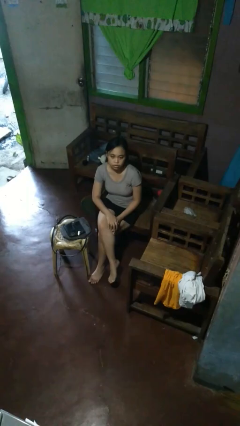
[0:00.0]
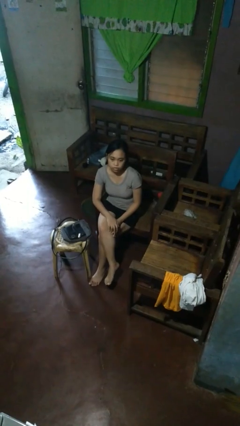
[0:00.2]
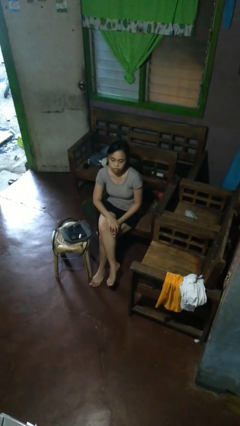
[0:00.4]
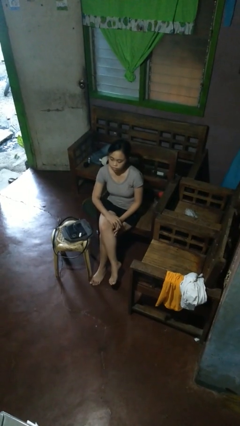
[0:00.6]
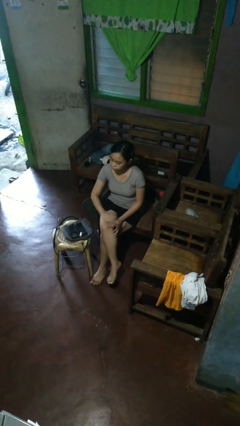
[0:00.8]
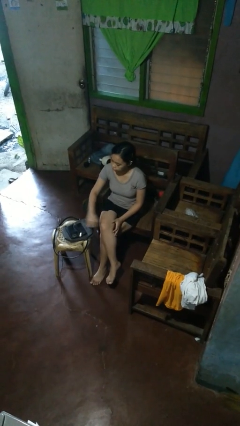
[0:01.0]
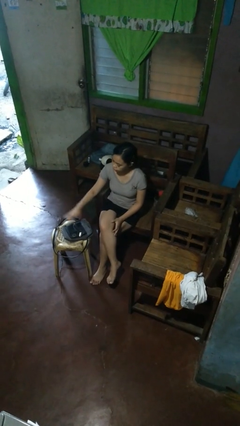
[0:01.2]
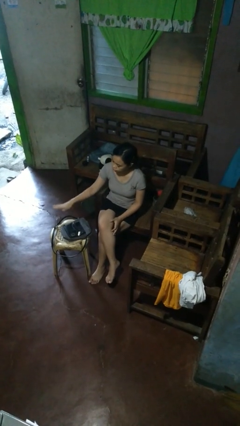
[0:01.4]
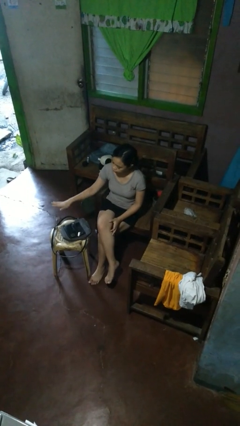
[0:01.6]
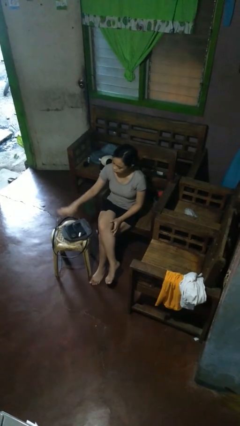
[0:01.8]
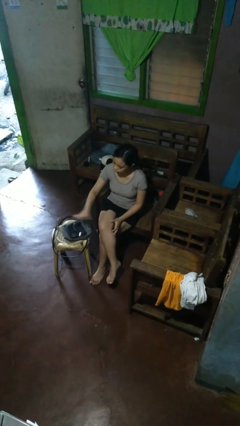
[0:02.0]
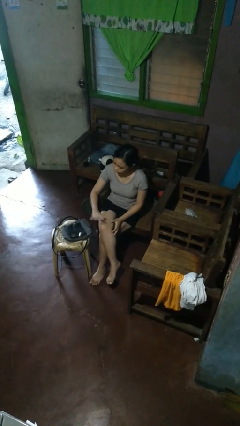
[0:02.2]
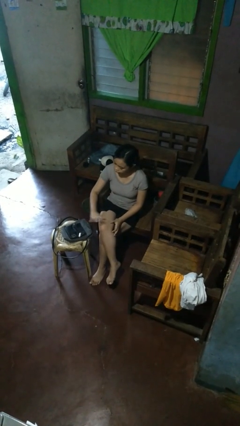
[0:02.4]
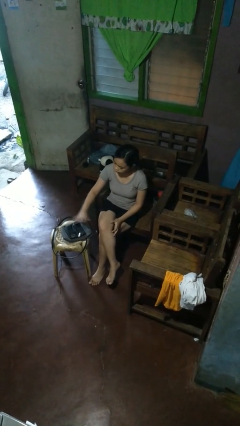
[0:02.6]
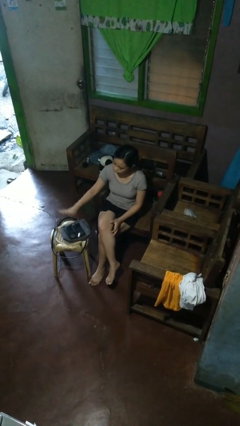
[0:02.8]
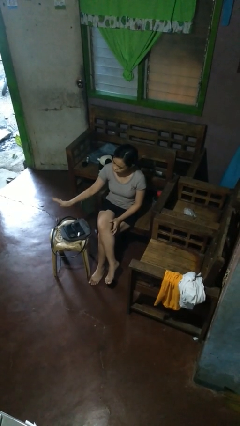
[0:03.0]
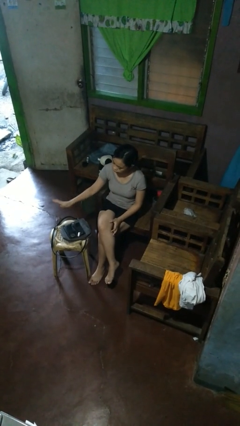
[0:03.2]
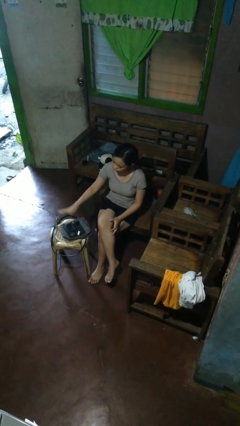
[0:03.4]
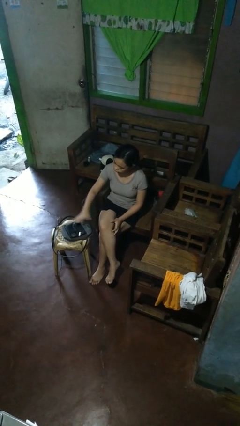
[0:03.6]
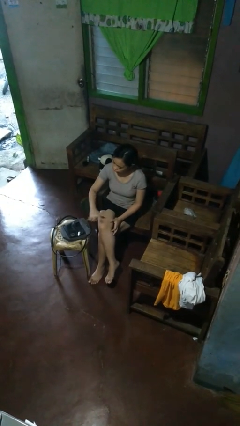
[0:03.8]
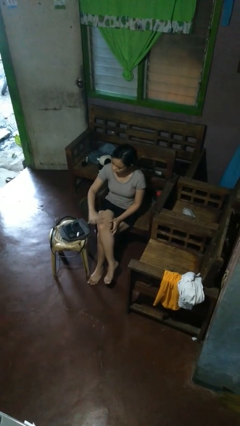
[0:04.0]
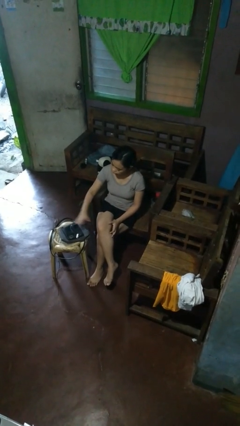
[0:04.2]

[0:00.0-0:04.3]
person waves hand over object

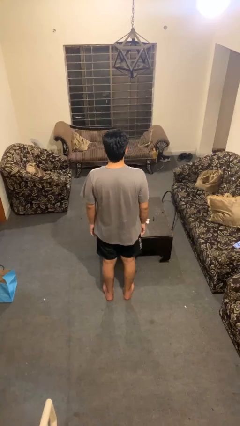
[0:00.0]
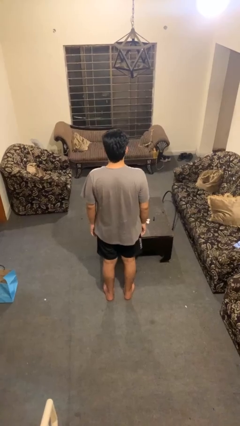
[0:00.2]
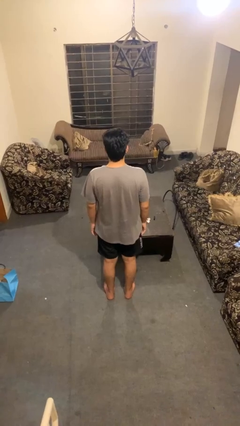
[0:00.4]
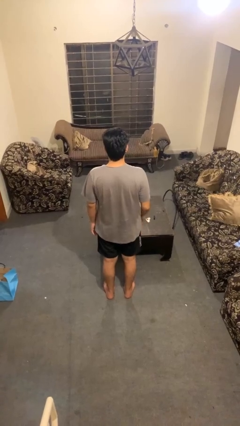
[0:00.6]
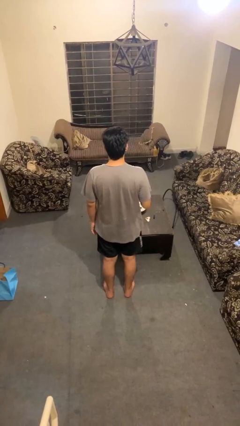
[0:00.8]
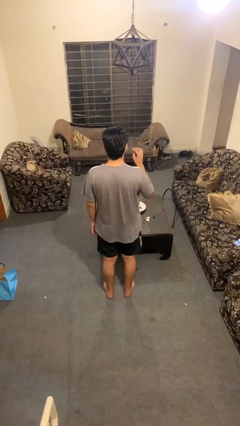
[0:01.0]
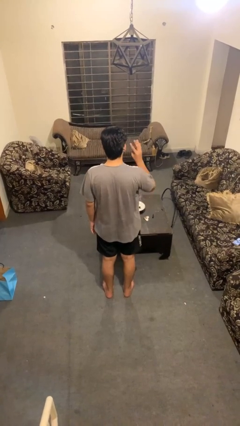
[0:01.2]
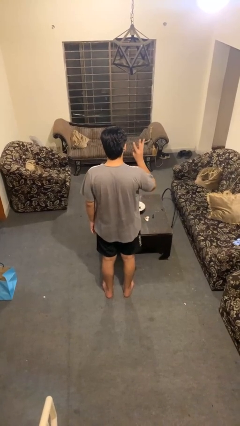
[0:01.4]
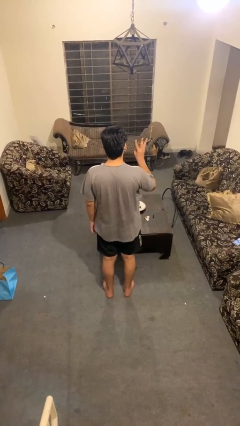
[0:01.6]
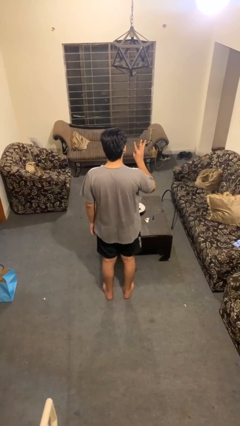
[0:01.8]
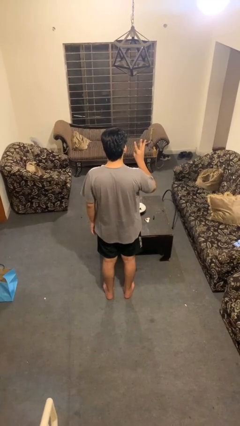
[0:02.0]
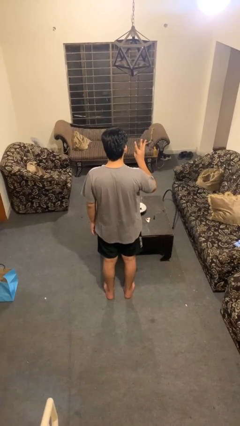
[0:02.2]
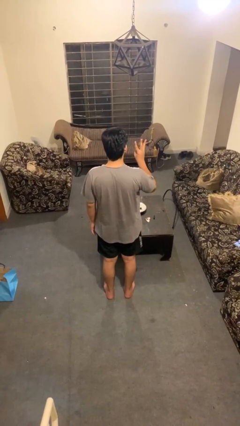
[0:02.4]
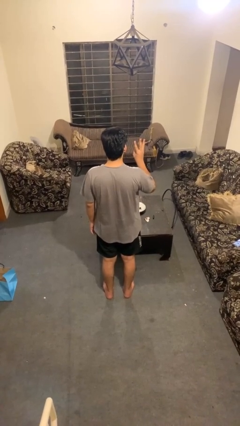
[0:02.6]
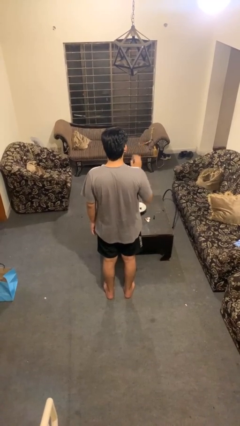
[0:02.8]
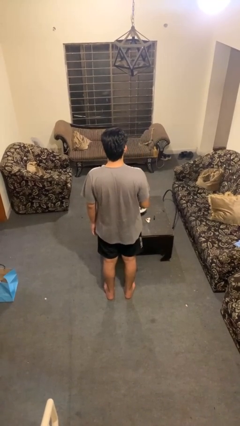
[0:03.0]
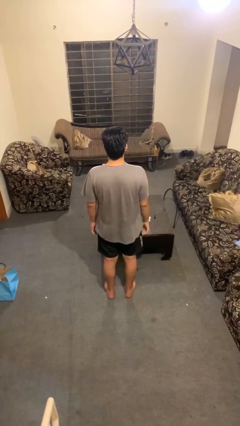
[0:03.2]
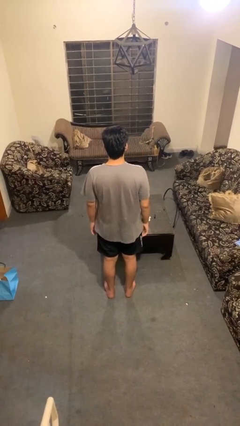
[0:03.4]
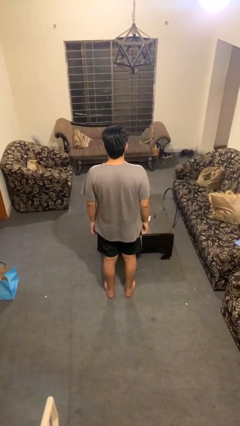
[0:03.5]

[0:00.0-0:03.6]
person gestures number three

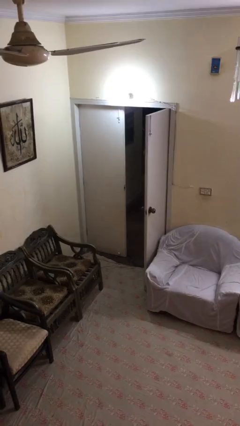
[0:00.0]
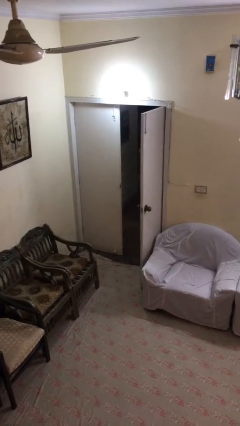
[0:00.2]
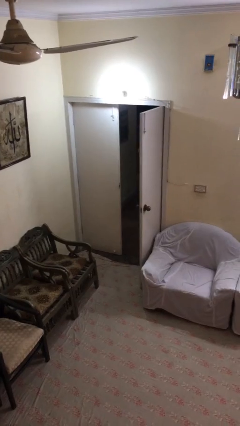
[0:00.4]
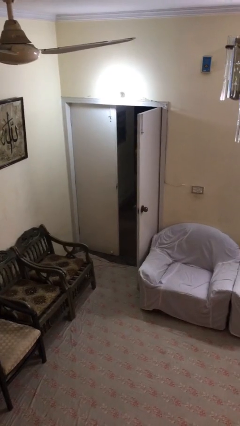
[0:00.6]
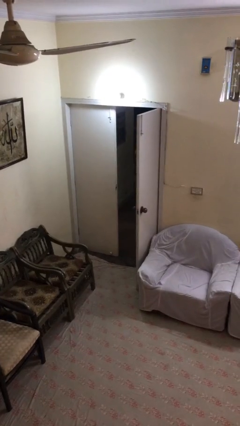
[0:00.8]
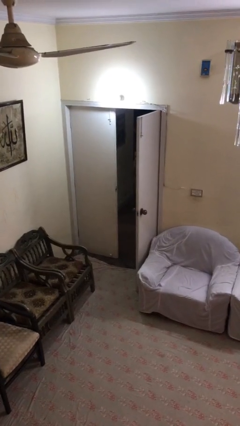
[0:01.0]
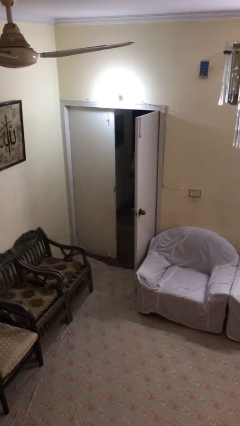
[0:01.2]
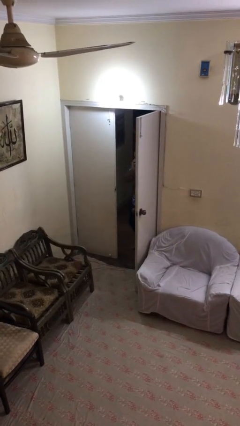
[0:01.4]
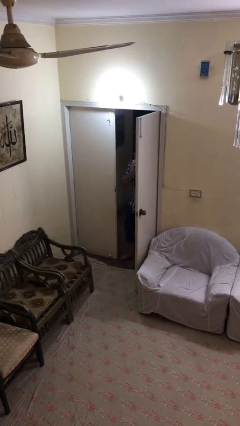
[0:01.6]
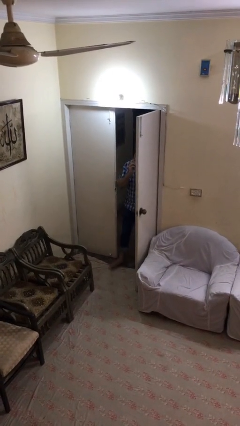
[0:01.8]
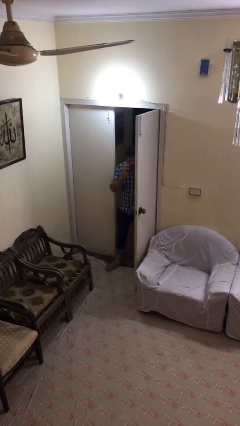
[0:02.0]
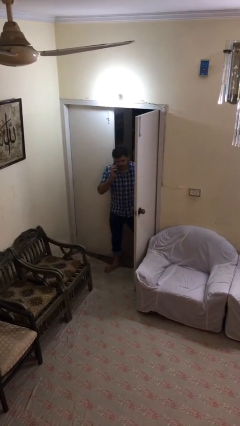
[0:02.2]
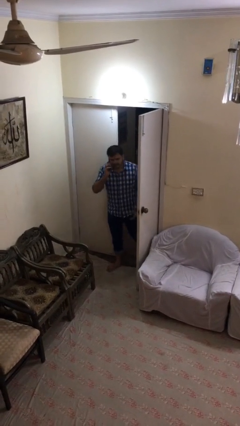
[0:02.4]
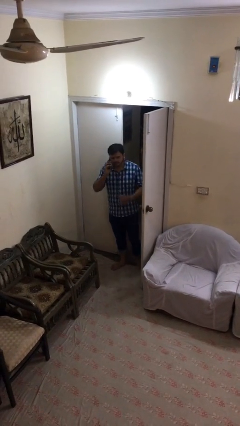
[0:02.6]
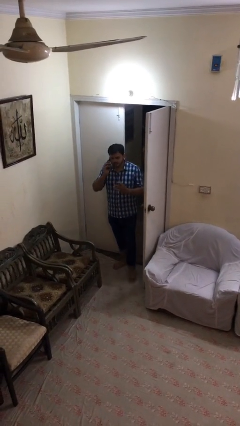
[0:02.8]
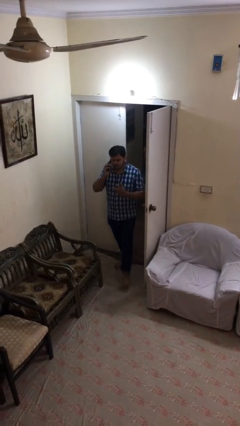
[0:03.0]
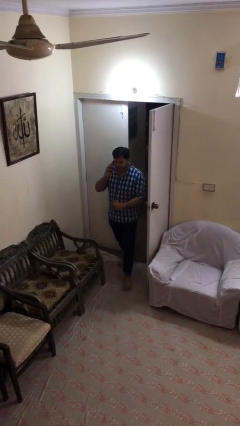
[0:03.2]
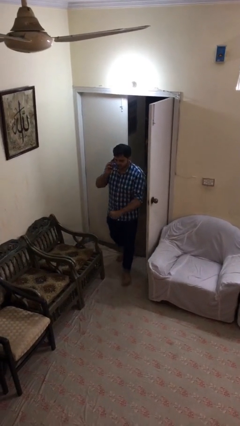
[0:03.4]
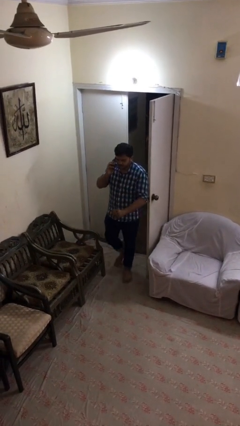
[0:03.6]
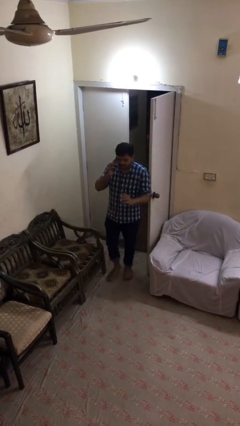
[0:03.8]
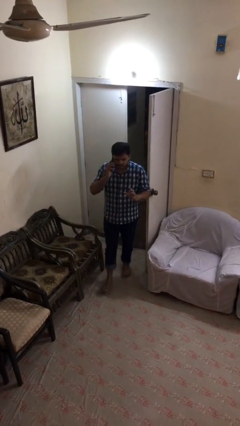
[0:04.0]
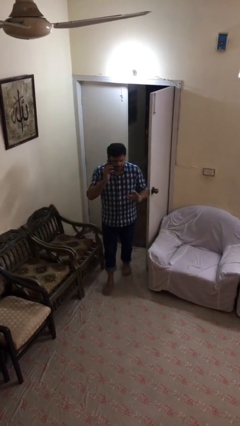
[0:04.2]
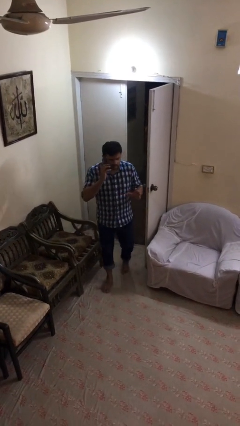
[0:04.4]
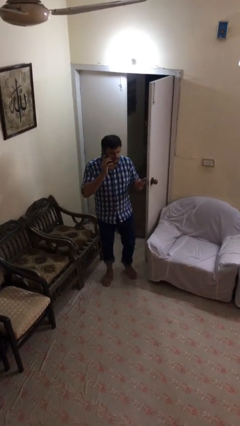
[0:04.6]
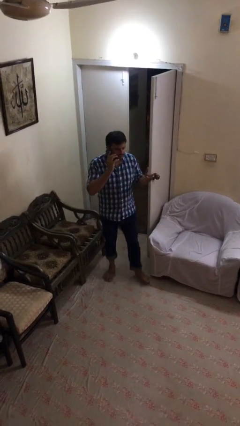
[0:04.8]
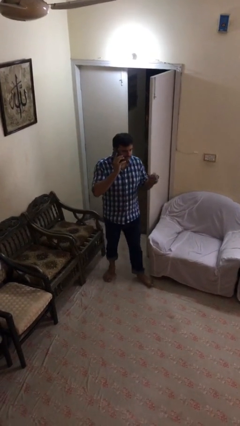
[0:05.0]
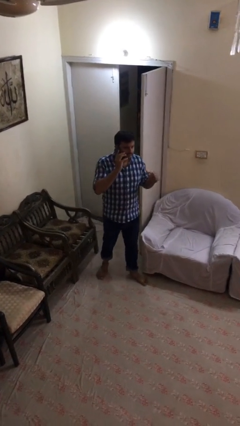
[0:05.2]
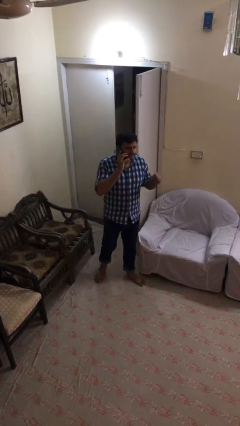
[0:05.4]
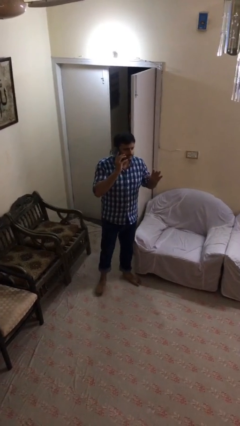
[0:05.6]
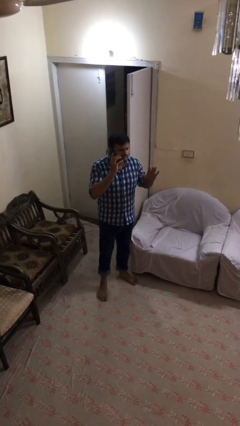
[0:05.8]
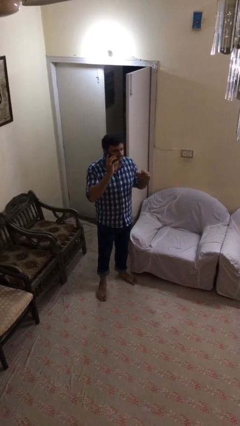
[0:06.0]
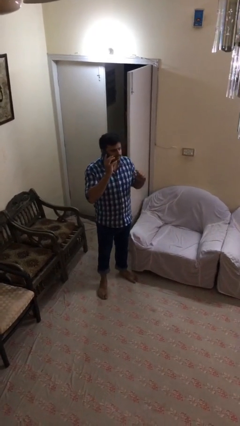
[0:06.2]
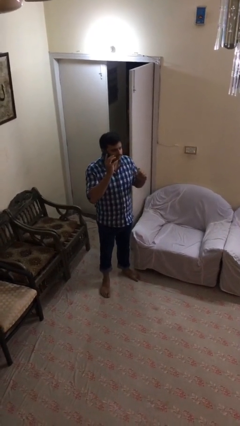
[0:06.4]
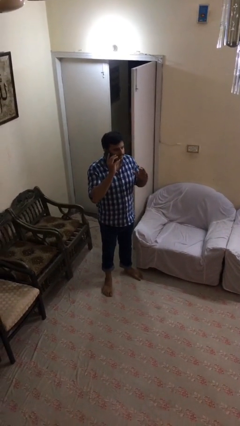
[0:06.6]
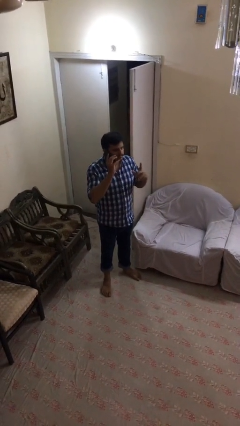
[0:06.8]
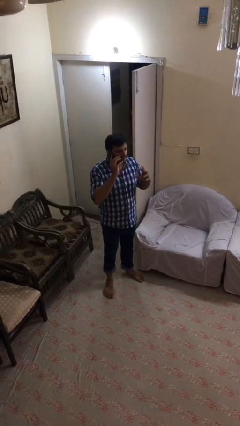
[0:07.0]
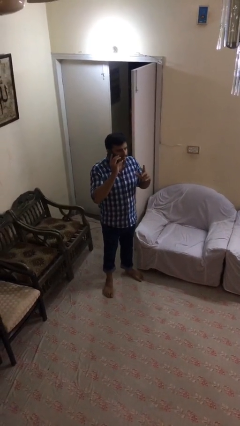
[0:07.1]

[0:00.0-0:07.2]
person enters scene through structure

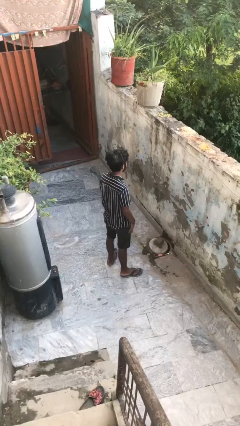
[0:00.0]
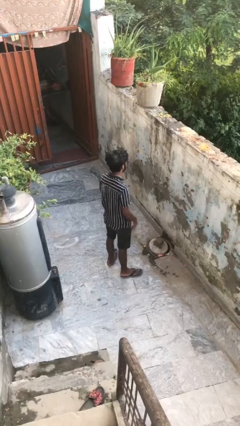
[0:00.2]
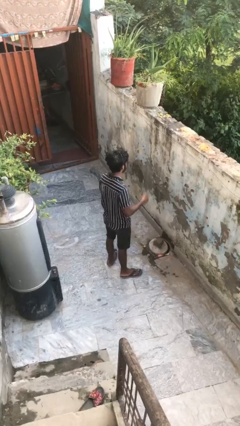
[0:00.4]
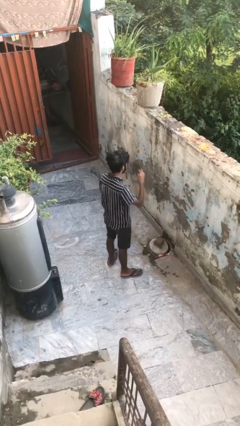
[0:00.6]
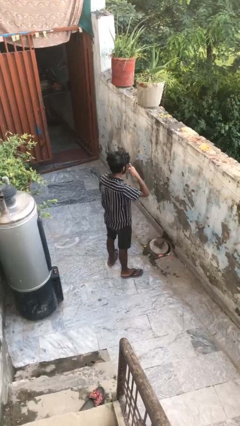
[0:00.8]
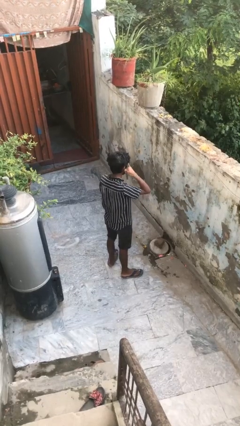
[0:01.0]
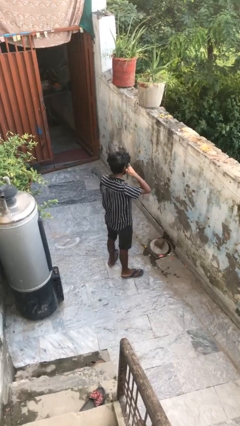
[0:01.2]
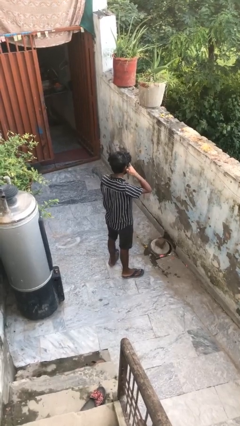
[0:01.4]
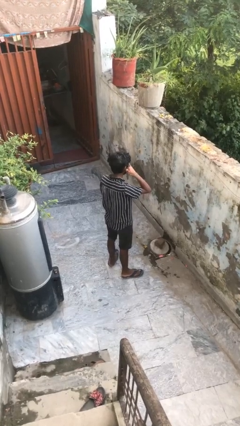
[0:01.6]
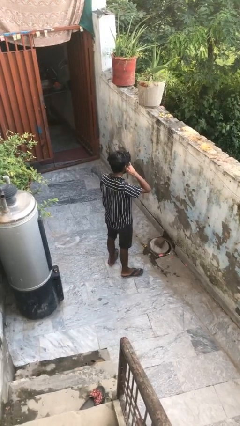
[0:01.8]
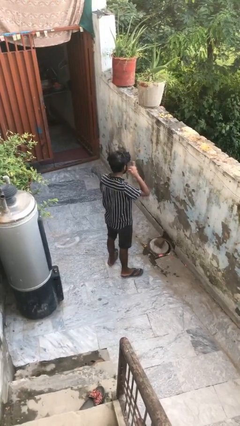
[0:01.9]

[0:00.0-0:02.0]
person gestures call me

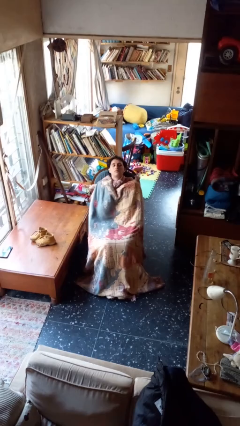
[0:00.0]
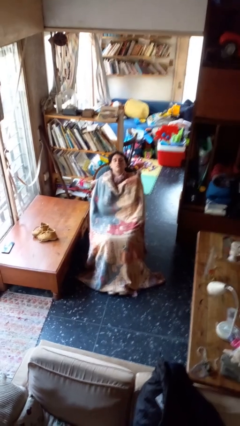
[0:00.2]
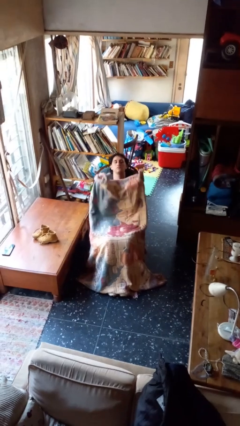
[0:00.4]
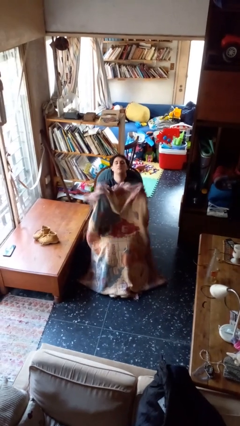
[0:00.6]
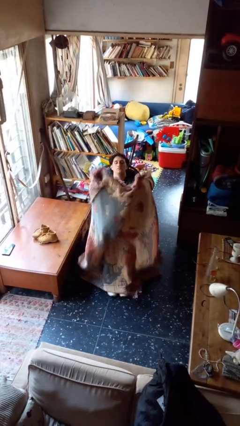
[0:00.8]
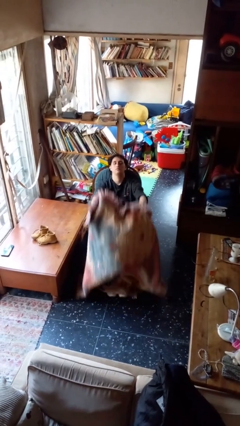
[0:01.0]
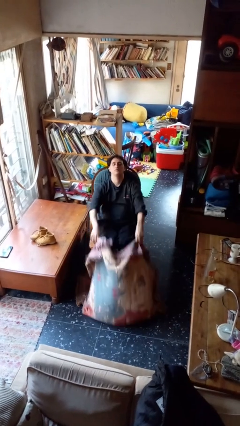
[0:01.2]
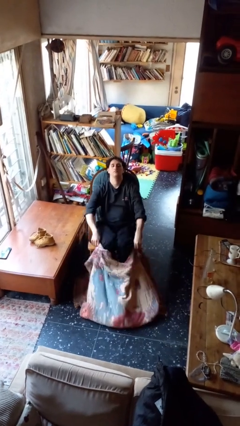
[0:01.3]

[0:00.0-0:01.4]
person uncovers with blanket
